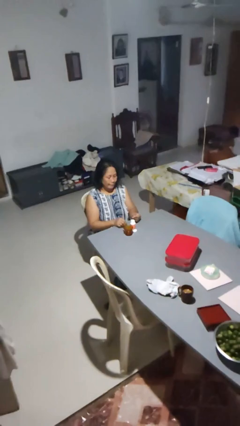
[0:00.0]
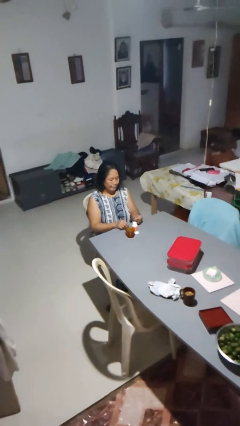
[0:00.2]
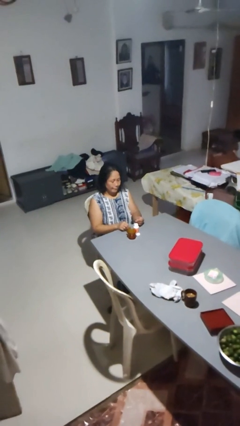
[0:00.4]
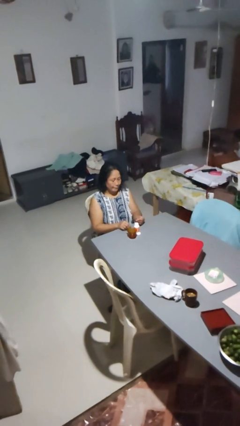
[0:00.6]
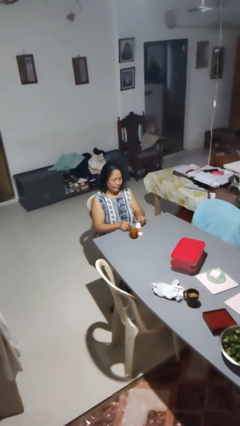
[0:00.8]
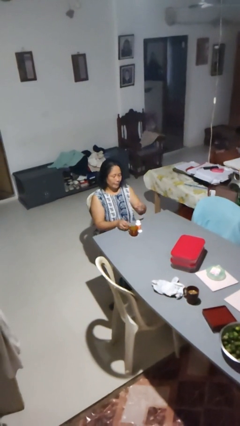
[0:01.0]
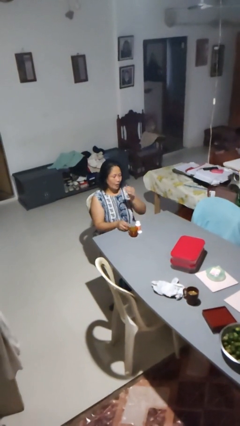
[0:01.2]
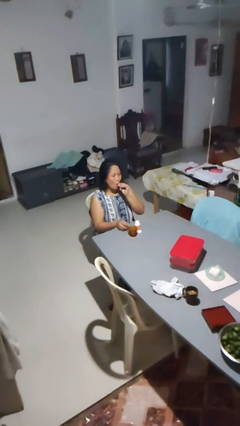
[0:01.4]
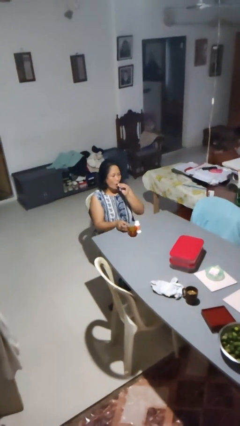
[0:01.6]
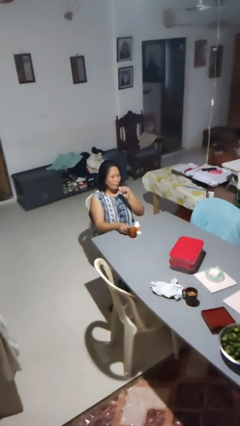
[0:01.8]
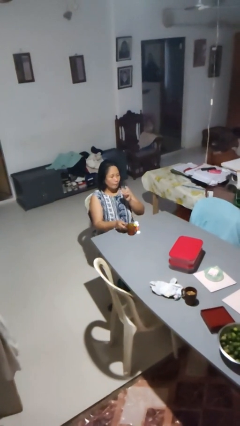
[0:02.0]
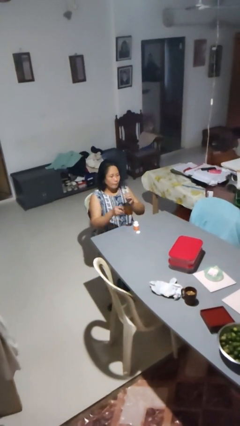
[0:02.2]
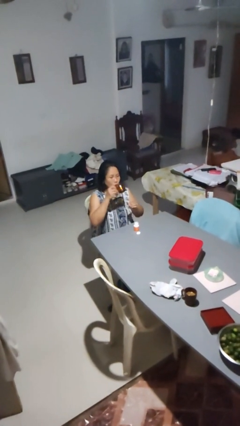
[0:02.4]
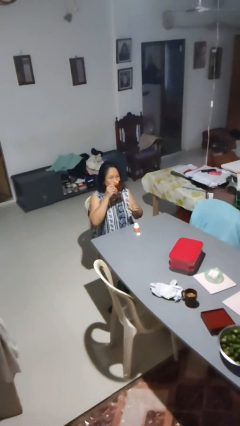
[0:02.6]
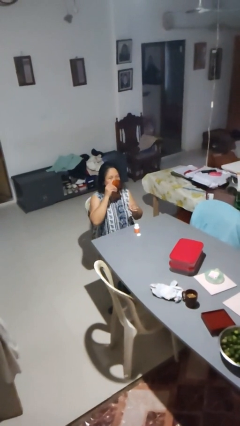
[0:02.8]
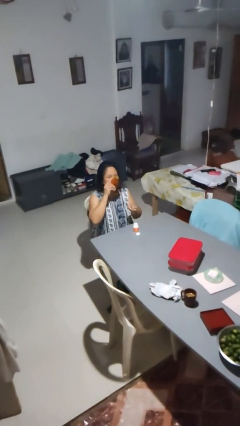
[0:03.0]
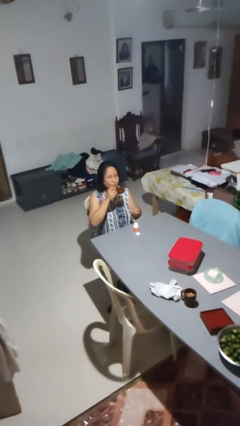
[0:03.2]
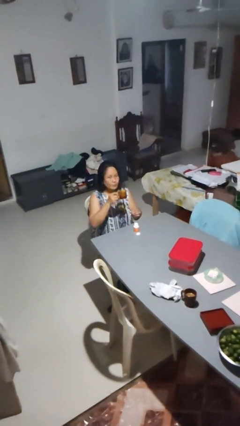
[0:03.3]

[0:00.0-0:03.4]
person drinks from cup

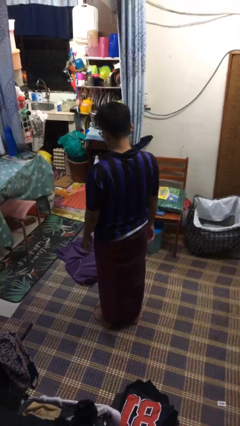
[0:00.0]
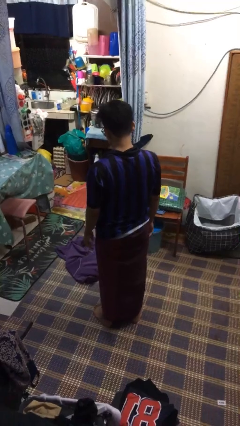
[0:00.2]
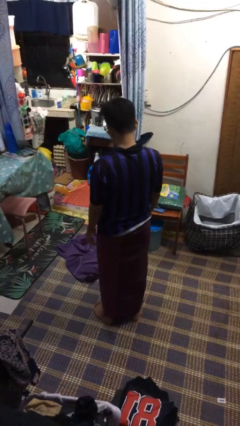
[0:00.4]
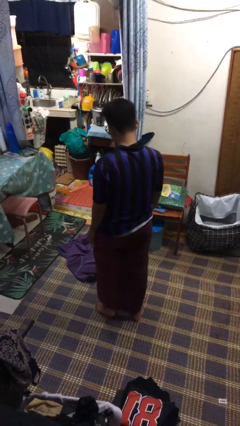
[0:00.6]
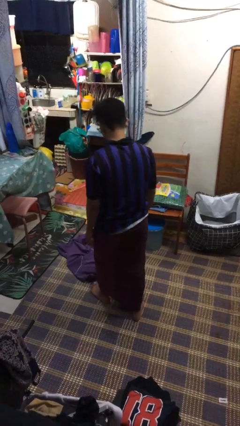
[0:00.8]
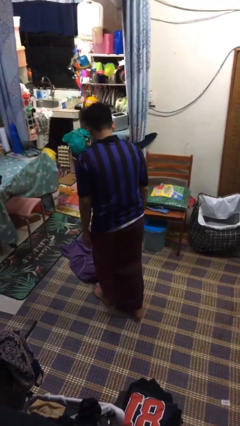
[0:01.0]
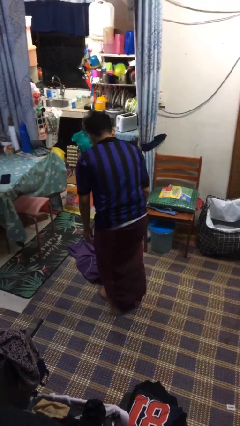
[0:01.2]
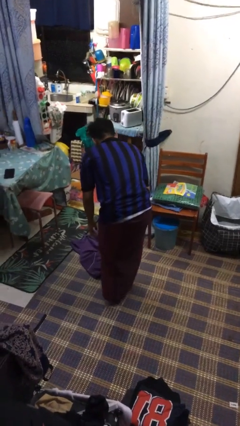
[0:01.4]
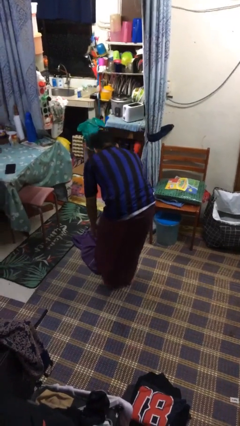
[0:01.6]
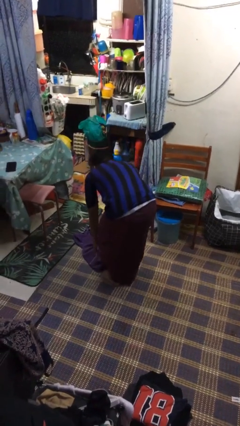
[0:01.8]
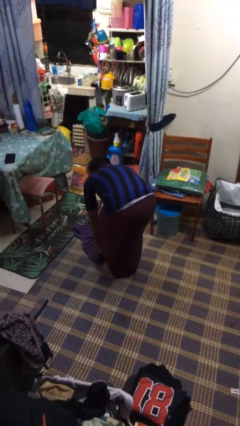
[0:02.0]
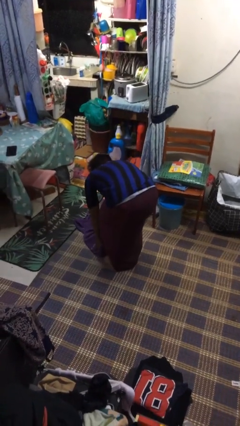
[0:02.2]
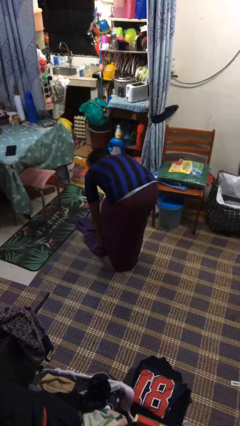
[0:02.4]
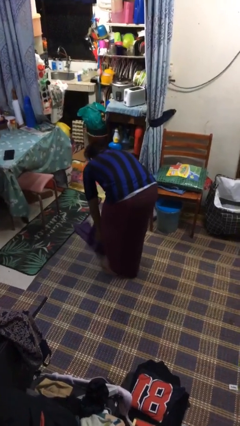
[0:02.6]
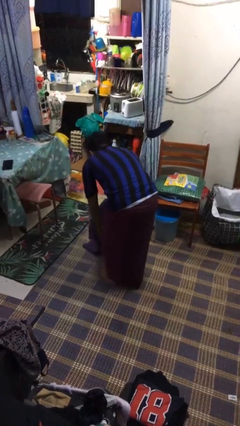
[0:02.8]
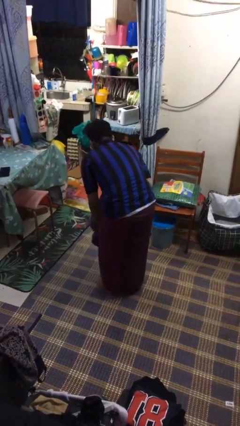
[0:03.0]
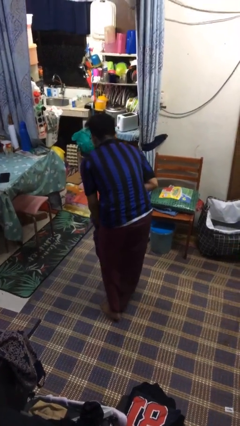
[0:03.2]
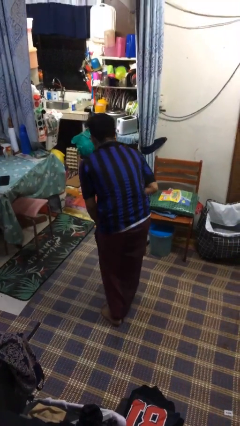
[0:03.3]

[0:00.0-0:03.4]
person picks up object from floor

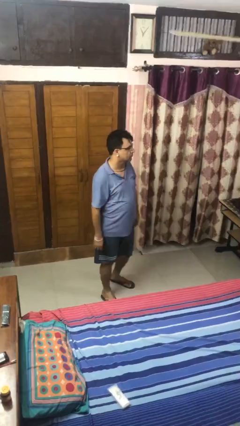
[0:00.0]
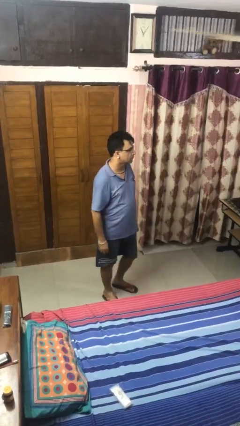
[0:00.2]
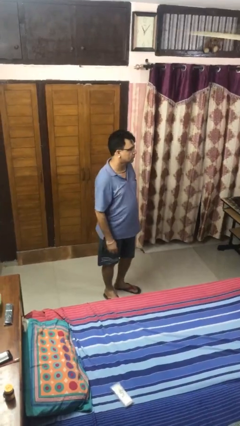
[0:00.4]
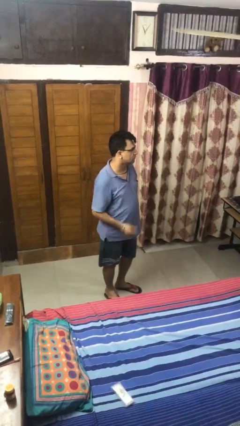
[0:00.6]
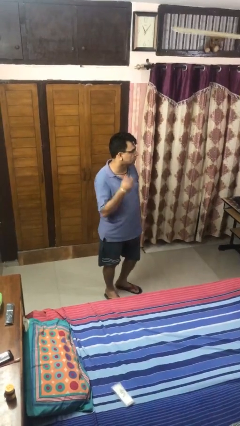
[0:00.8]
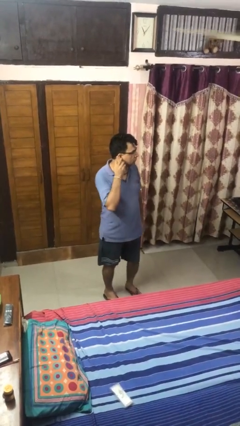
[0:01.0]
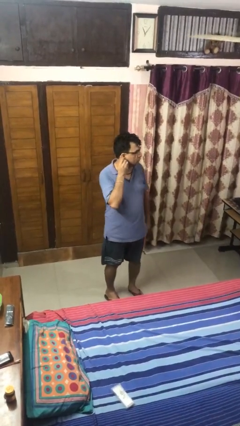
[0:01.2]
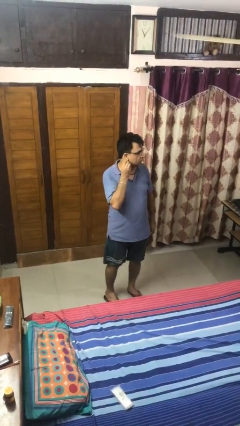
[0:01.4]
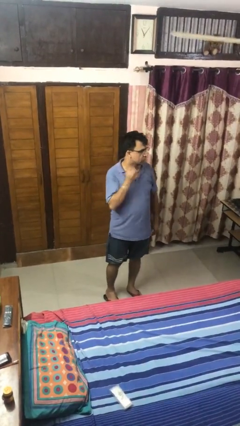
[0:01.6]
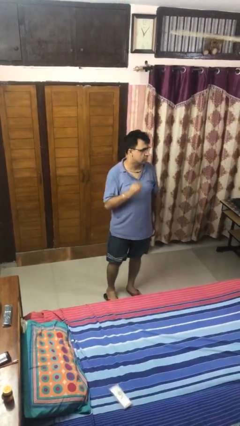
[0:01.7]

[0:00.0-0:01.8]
person takes off earrings

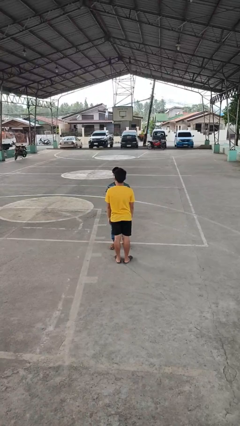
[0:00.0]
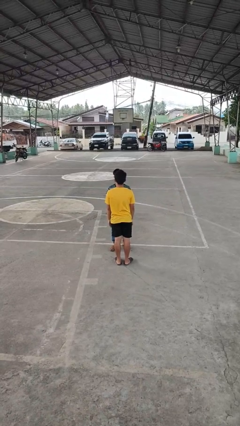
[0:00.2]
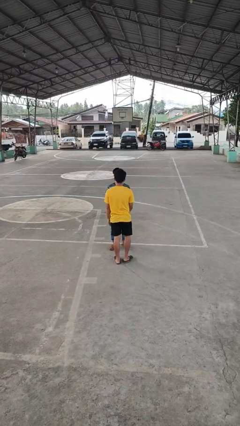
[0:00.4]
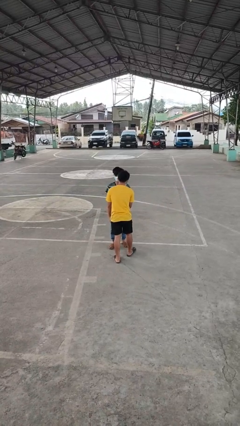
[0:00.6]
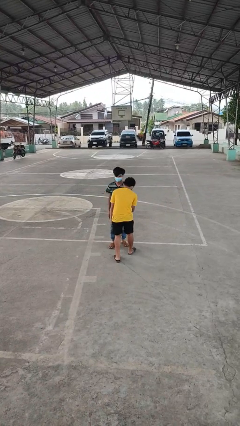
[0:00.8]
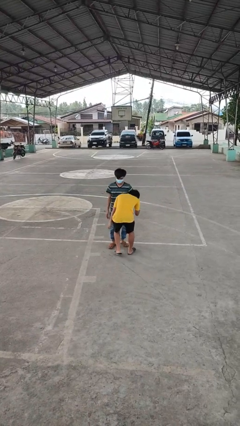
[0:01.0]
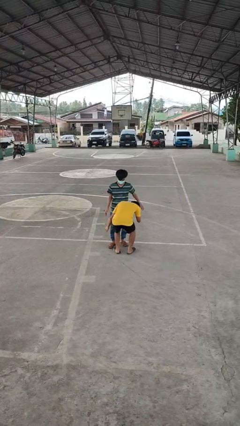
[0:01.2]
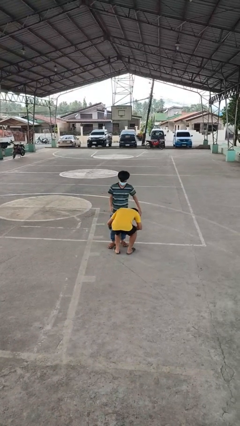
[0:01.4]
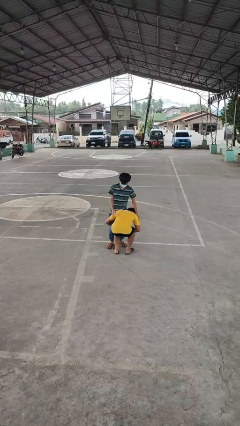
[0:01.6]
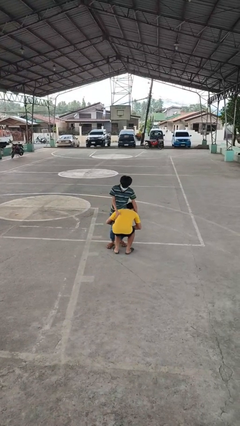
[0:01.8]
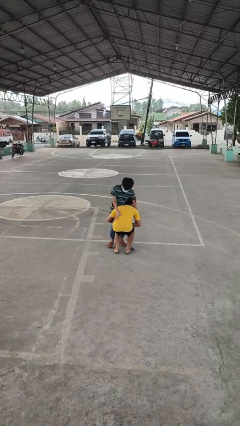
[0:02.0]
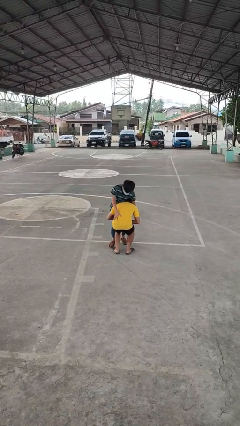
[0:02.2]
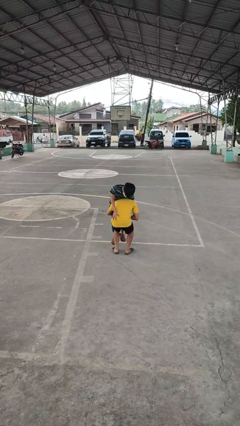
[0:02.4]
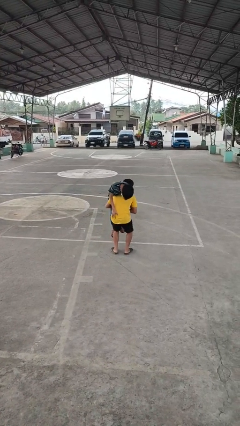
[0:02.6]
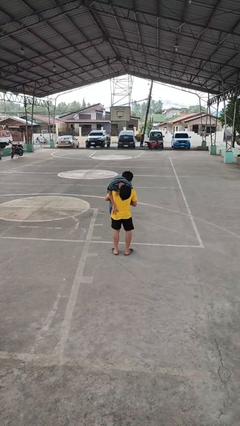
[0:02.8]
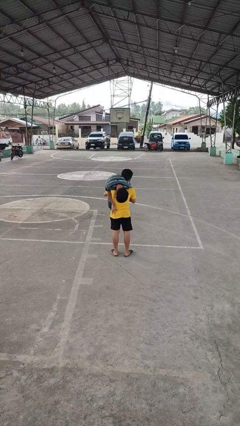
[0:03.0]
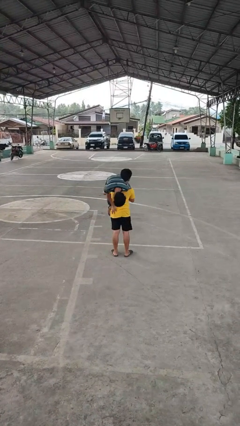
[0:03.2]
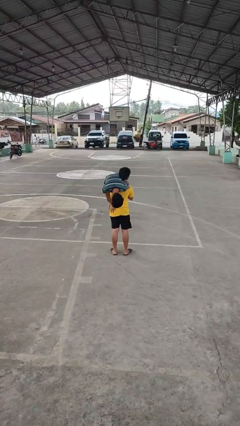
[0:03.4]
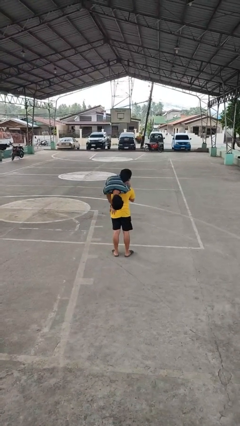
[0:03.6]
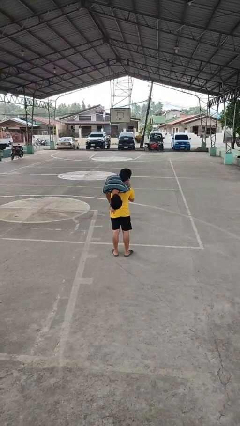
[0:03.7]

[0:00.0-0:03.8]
person carries person over shoulder

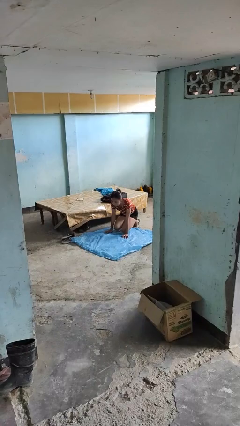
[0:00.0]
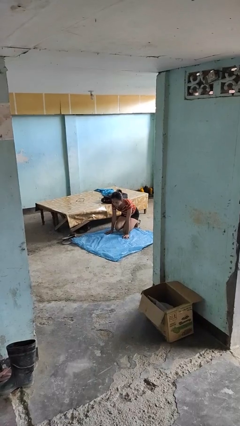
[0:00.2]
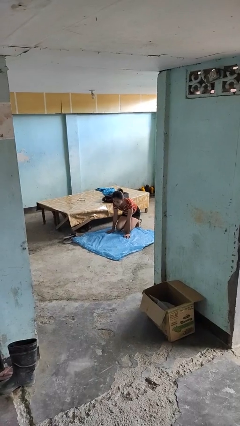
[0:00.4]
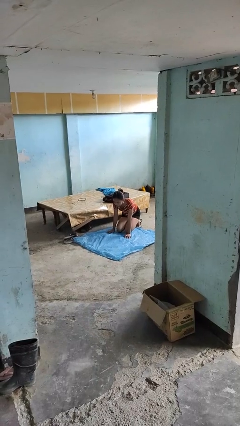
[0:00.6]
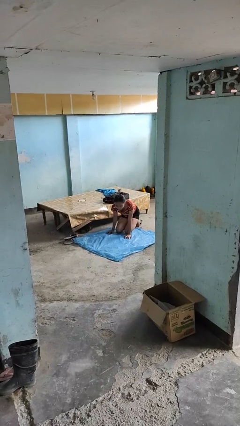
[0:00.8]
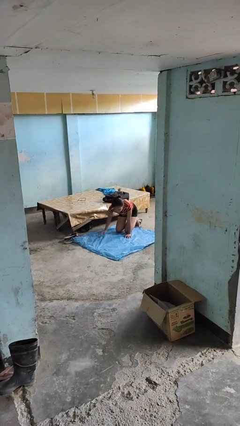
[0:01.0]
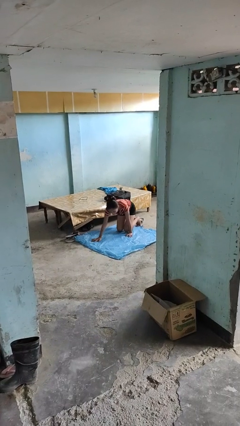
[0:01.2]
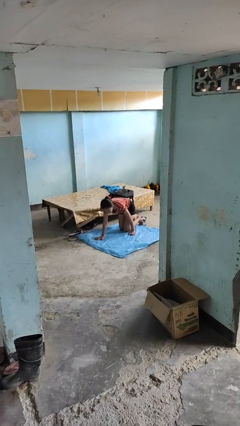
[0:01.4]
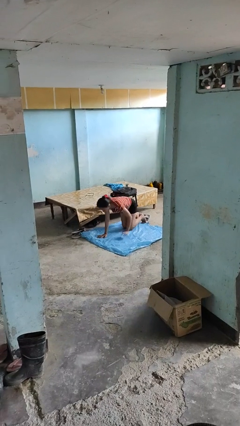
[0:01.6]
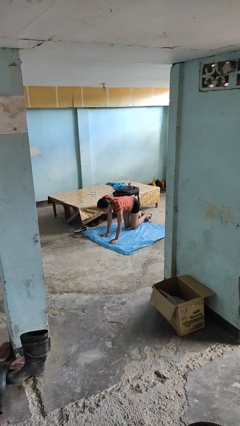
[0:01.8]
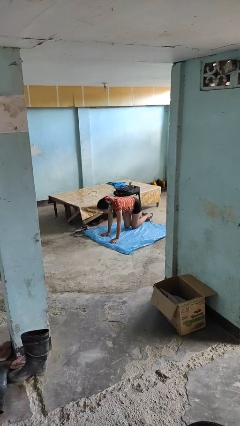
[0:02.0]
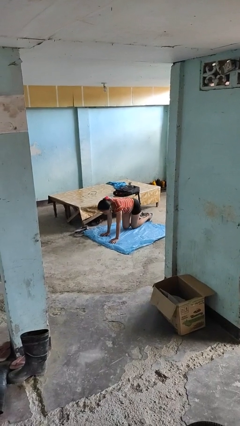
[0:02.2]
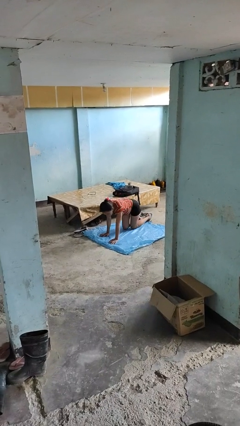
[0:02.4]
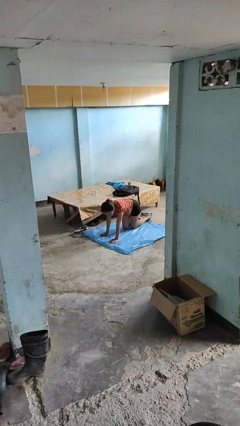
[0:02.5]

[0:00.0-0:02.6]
person crawls

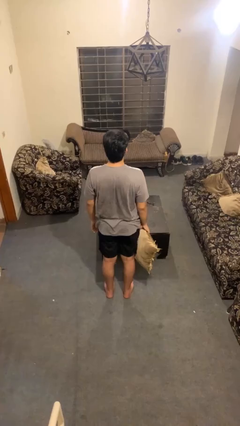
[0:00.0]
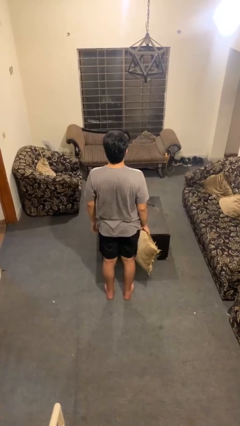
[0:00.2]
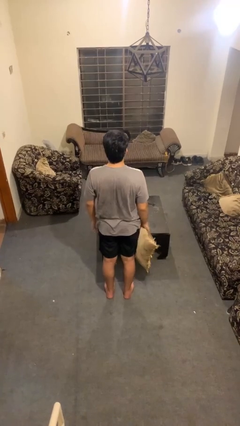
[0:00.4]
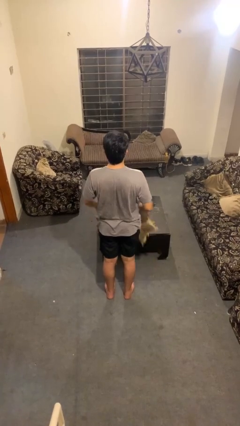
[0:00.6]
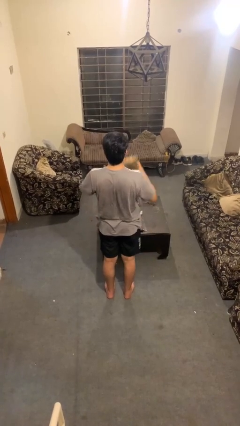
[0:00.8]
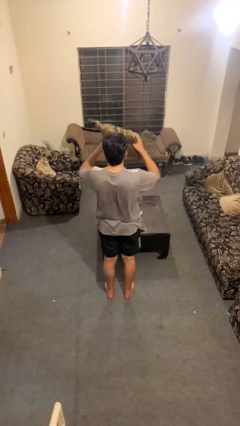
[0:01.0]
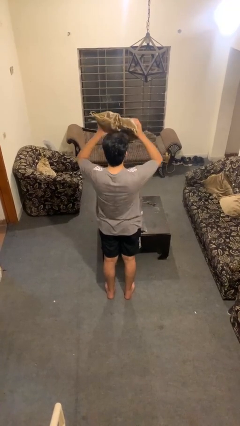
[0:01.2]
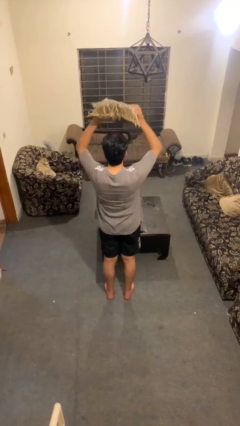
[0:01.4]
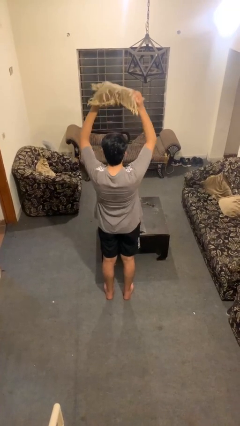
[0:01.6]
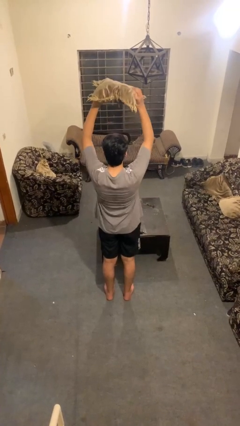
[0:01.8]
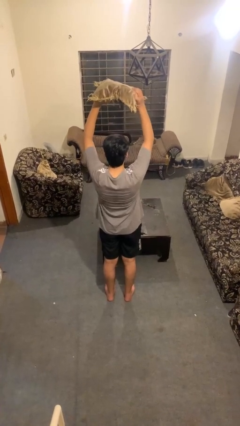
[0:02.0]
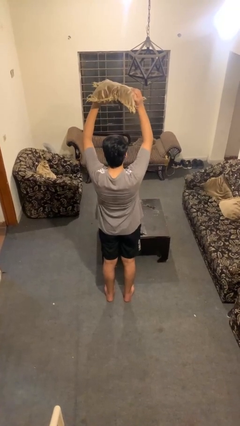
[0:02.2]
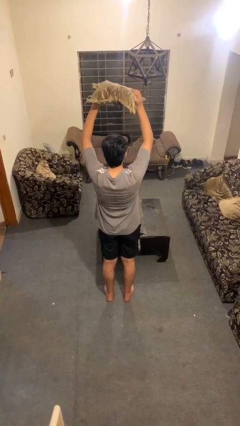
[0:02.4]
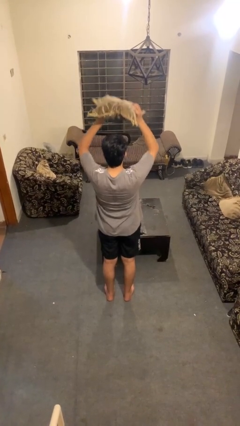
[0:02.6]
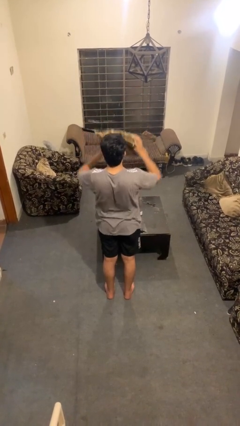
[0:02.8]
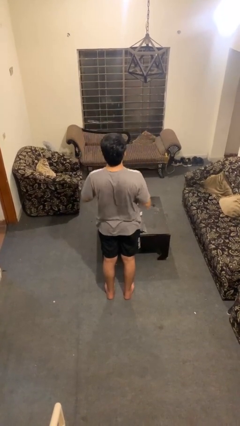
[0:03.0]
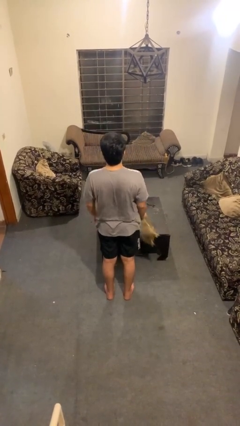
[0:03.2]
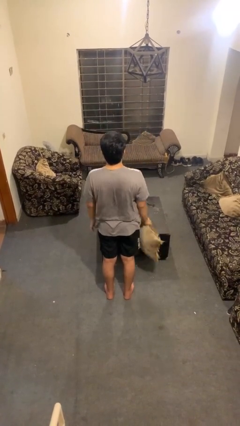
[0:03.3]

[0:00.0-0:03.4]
person holds object above head
